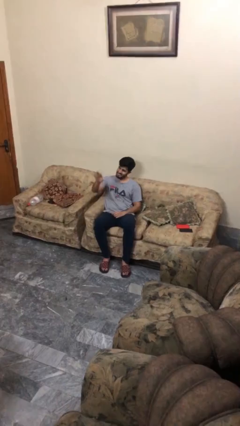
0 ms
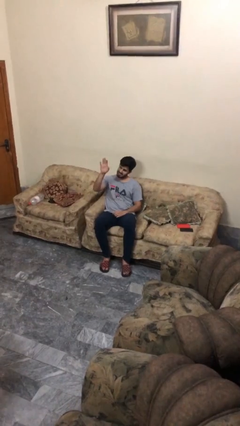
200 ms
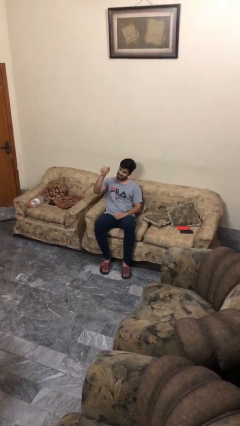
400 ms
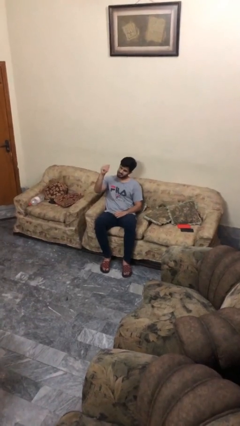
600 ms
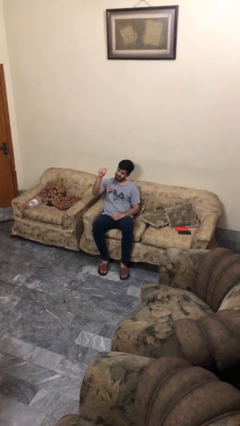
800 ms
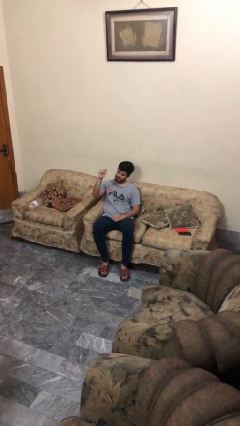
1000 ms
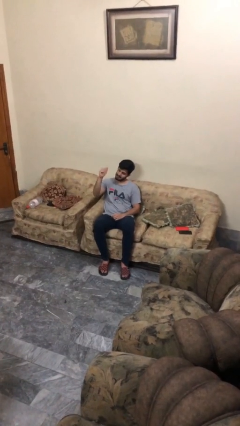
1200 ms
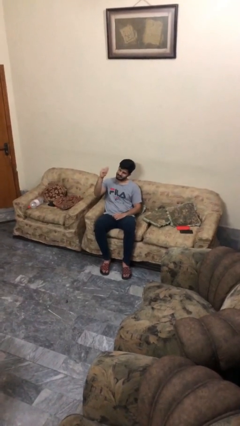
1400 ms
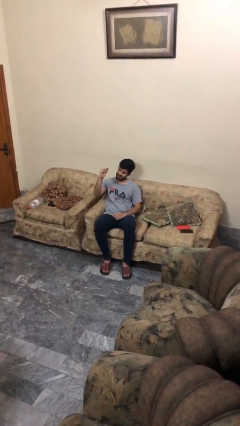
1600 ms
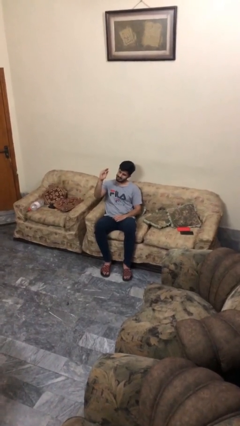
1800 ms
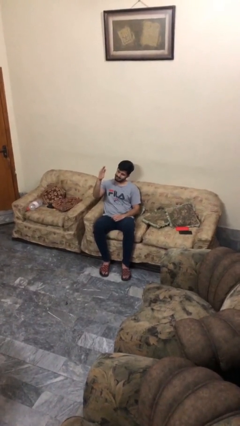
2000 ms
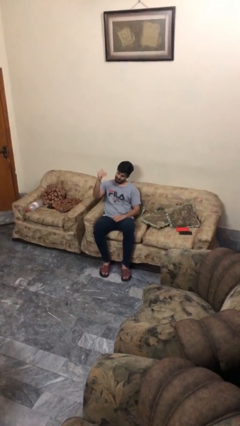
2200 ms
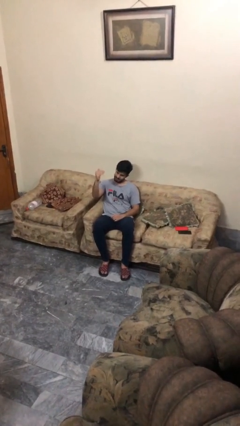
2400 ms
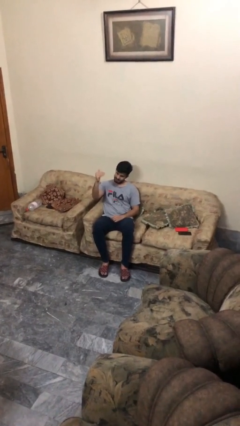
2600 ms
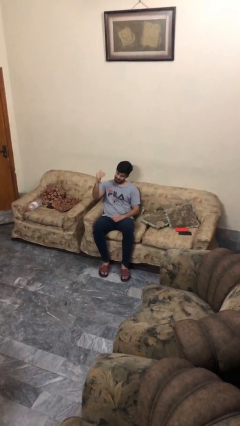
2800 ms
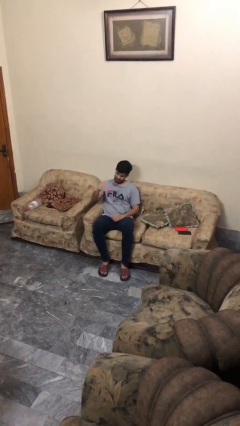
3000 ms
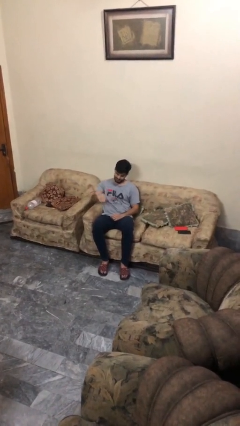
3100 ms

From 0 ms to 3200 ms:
person gestures come here

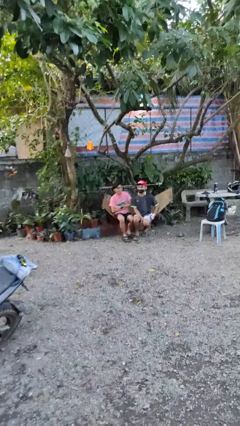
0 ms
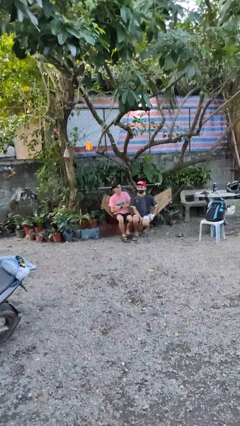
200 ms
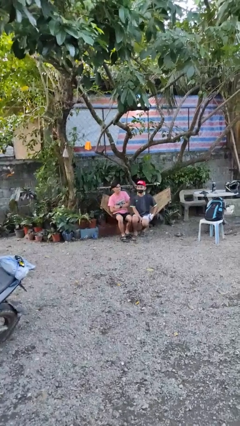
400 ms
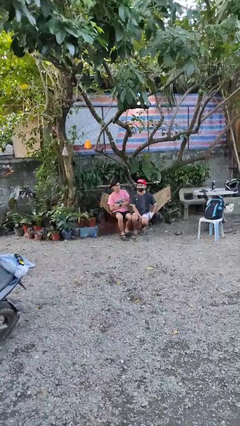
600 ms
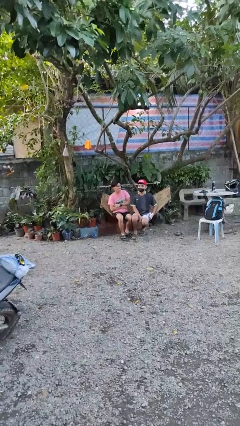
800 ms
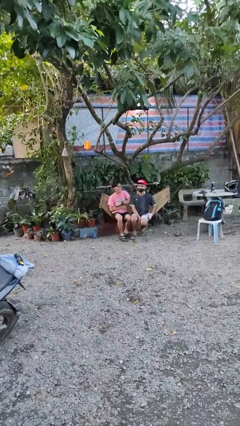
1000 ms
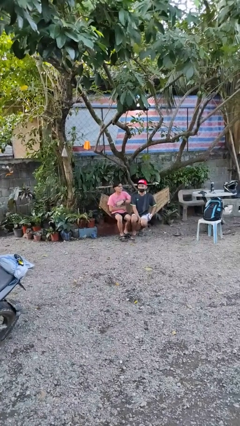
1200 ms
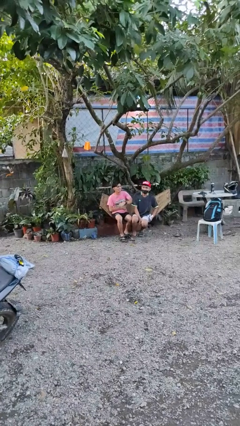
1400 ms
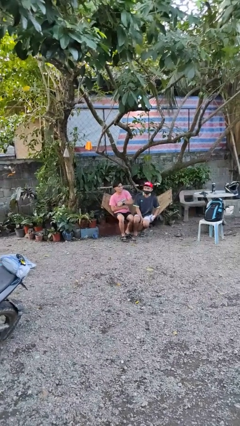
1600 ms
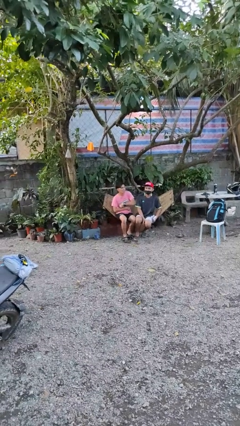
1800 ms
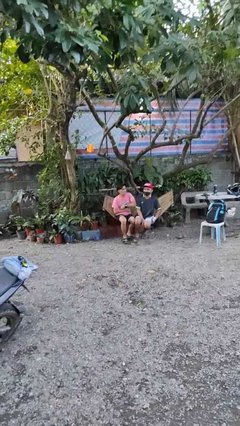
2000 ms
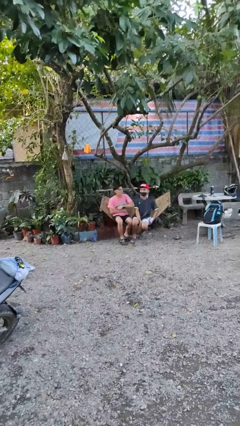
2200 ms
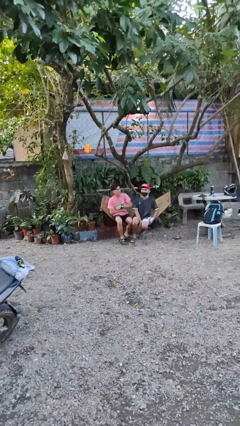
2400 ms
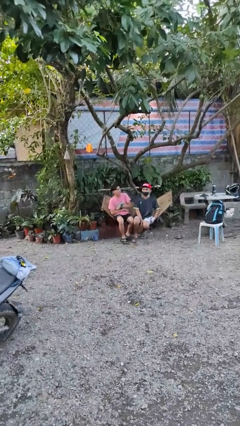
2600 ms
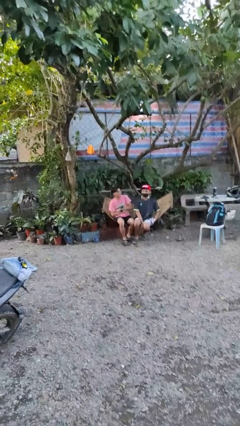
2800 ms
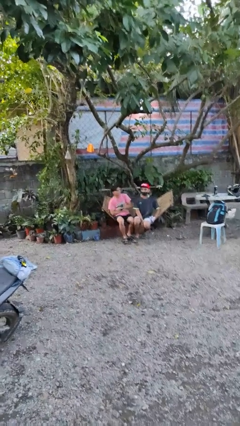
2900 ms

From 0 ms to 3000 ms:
person nudges person with elbow

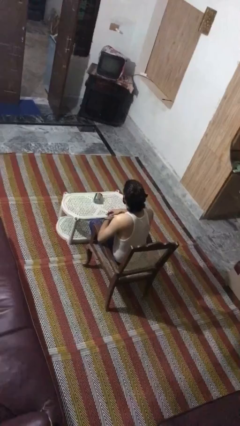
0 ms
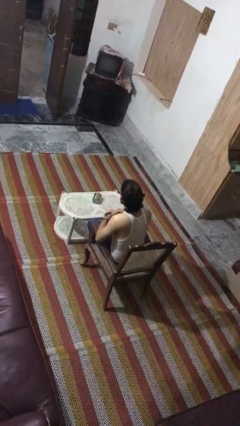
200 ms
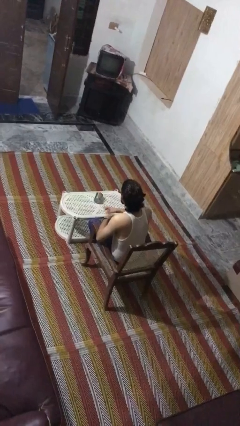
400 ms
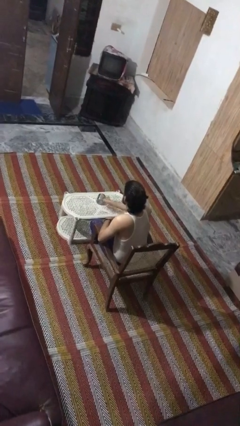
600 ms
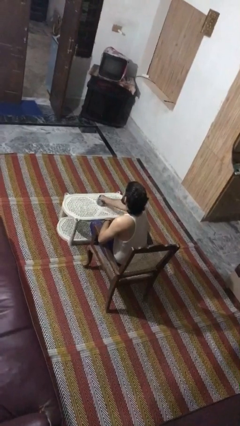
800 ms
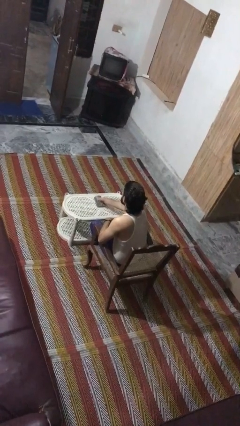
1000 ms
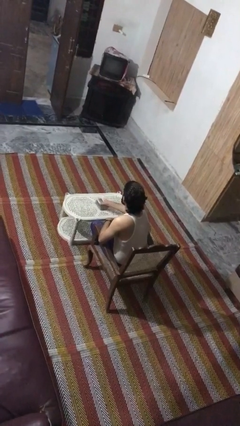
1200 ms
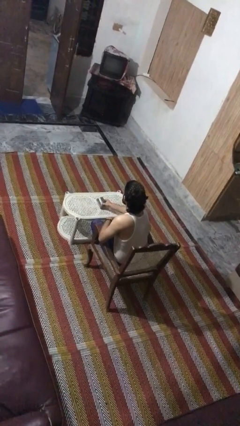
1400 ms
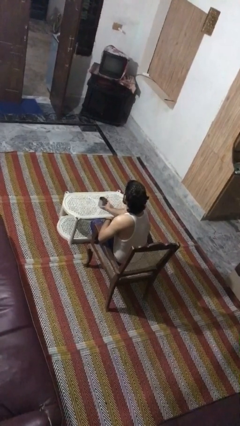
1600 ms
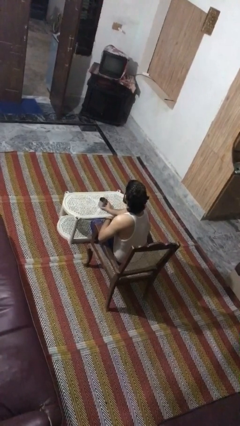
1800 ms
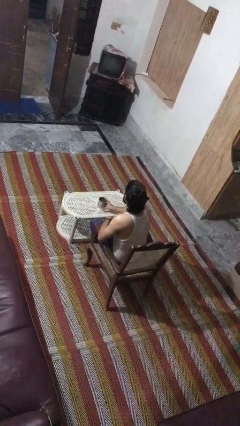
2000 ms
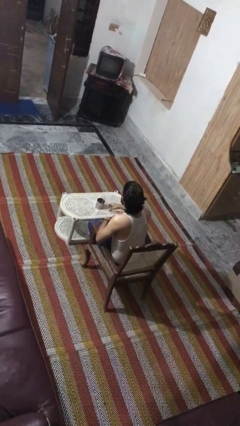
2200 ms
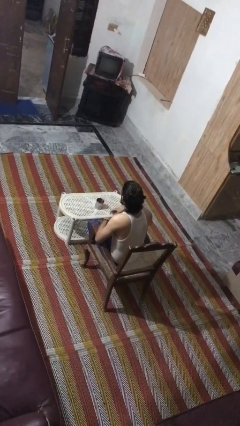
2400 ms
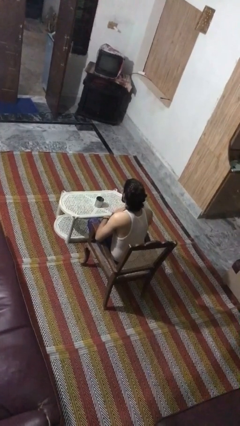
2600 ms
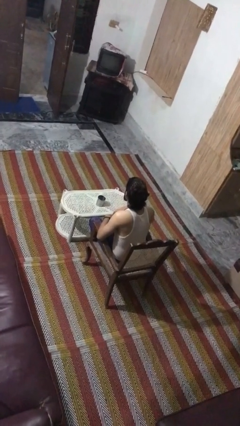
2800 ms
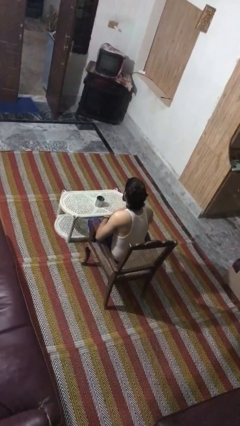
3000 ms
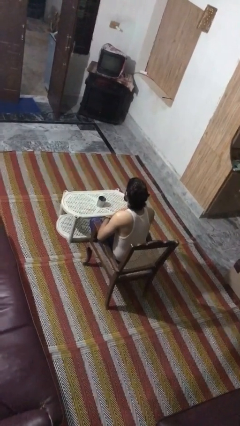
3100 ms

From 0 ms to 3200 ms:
person sets upright glass

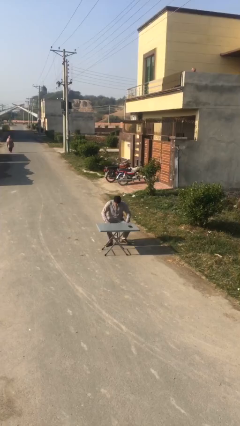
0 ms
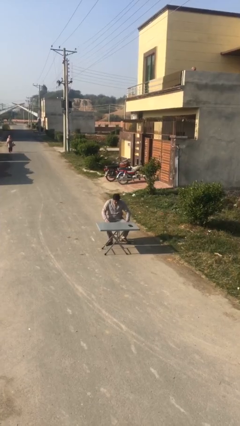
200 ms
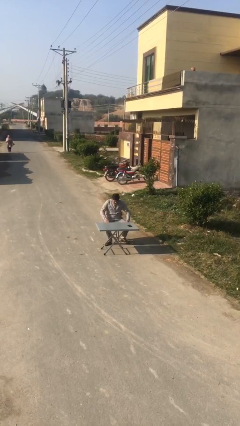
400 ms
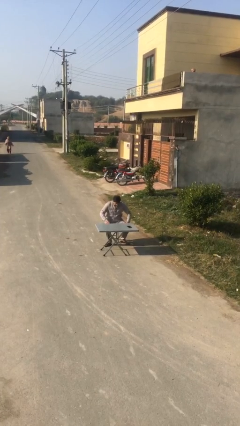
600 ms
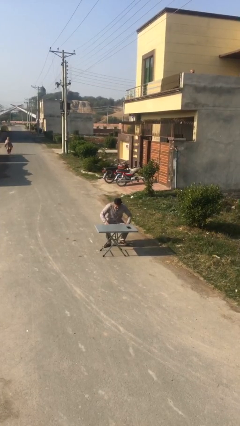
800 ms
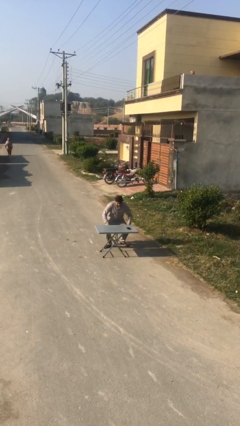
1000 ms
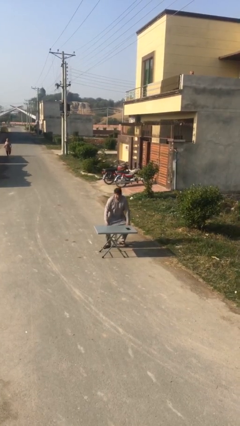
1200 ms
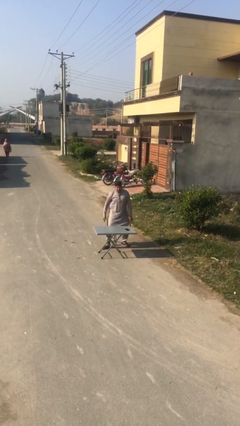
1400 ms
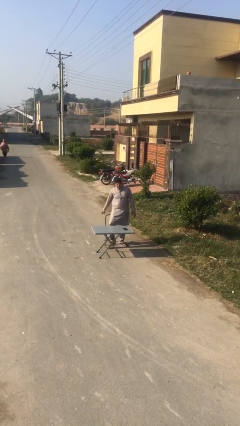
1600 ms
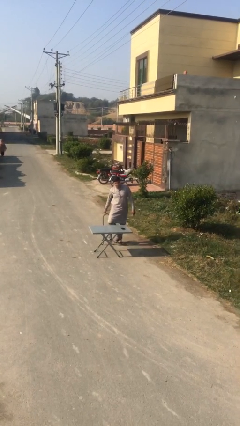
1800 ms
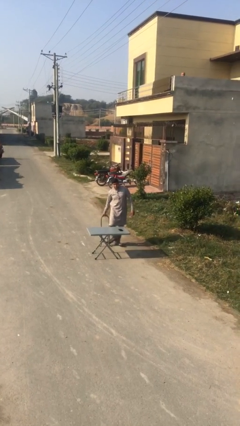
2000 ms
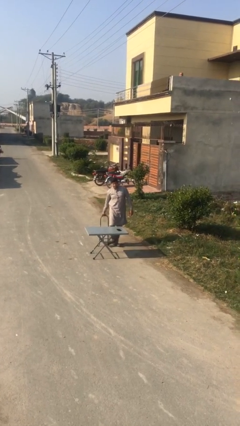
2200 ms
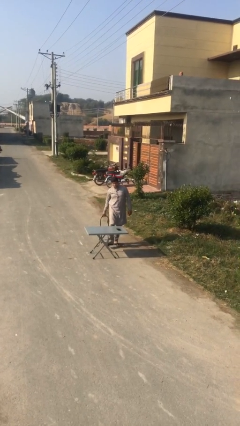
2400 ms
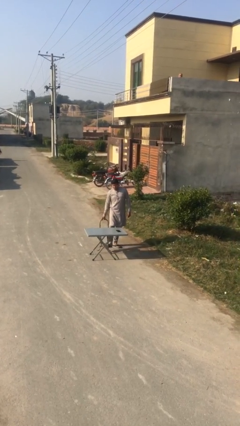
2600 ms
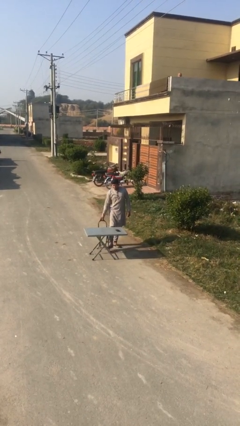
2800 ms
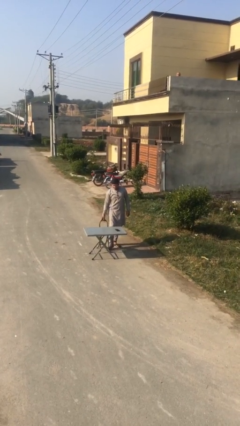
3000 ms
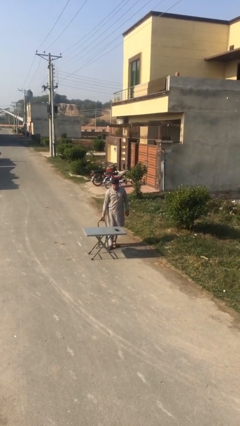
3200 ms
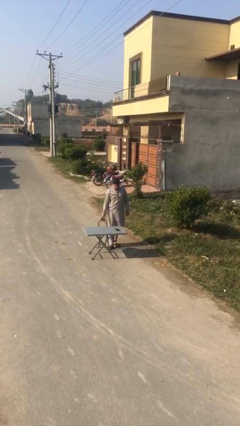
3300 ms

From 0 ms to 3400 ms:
person stands up

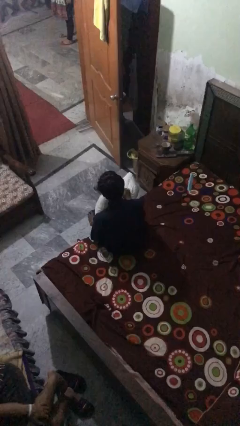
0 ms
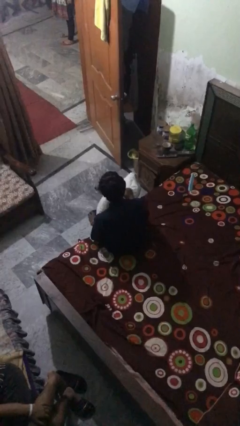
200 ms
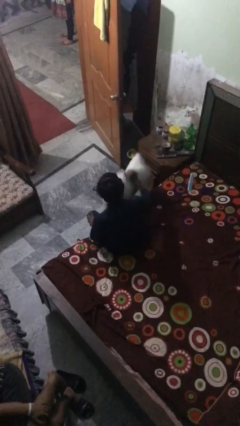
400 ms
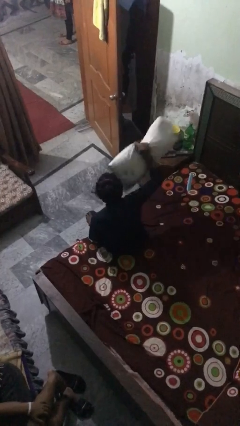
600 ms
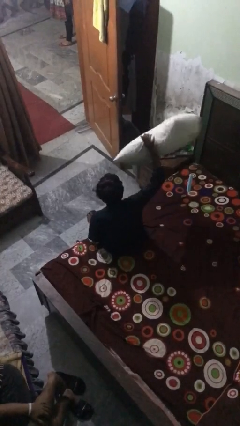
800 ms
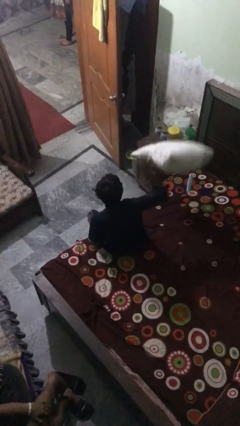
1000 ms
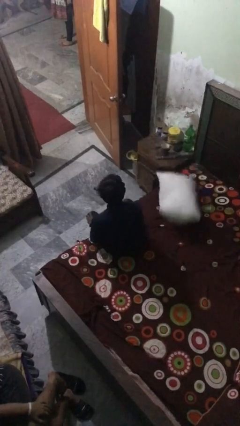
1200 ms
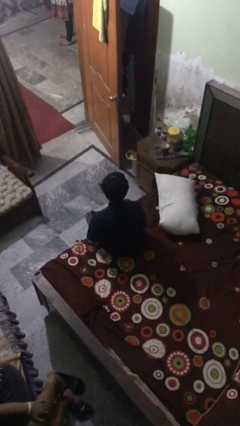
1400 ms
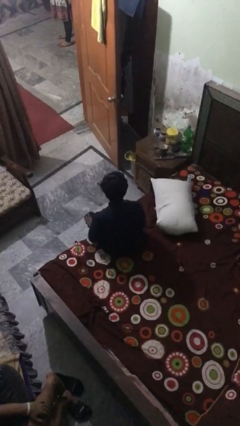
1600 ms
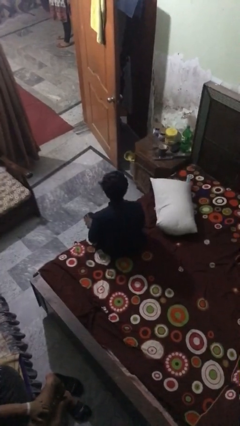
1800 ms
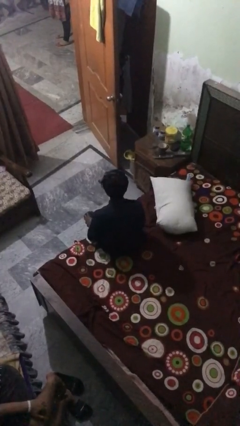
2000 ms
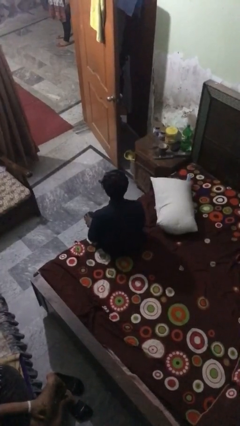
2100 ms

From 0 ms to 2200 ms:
person throws object on bed

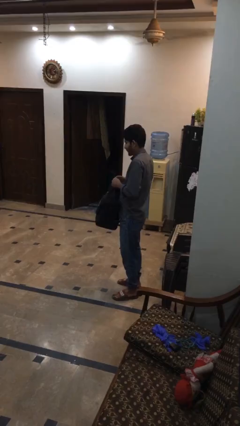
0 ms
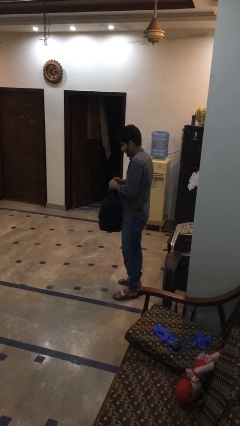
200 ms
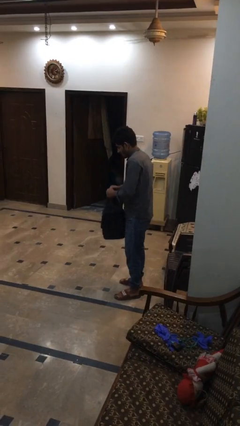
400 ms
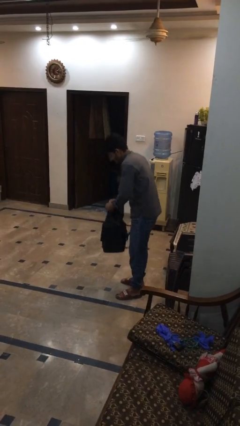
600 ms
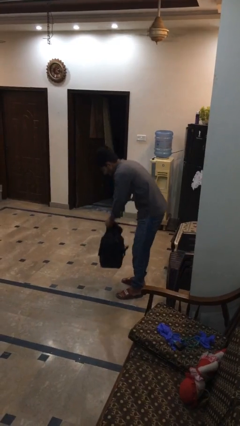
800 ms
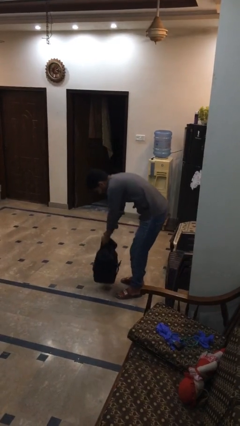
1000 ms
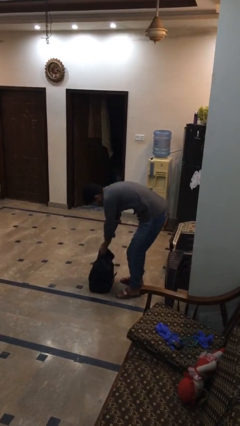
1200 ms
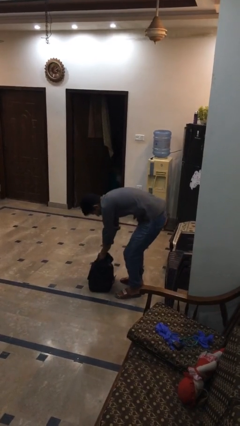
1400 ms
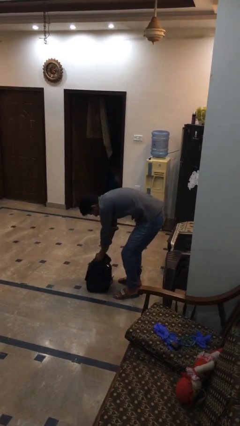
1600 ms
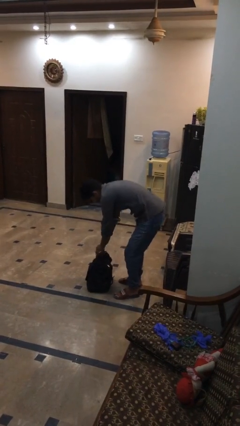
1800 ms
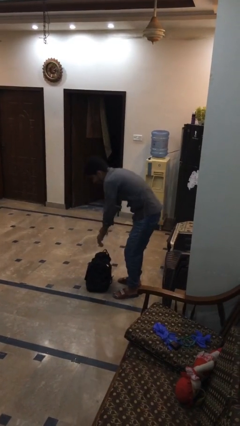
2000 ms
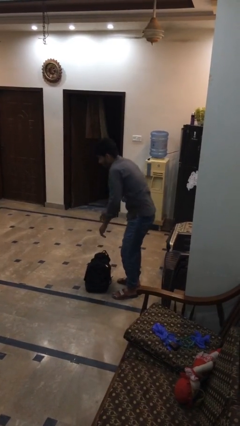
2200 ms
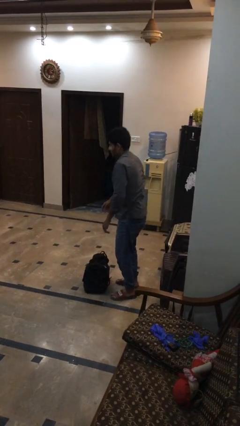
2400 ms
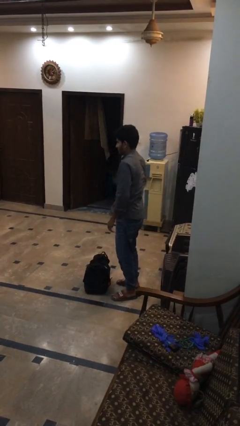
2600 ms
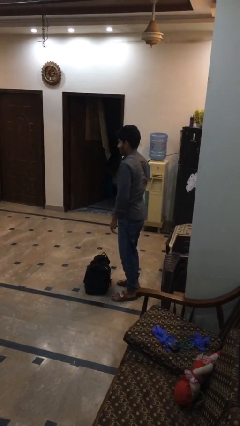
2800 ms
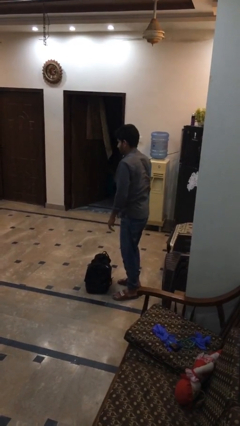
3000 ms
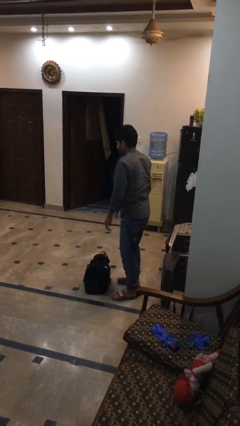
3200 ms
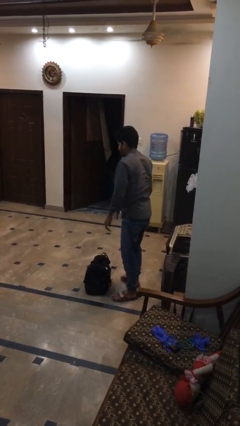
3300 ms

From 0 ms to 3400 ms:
person puts down object on floor
